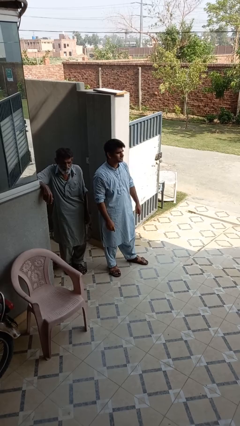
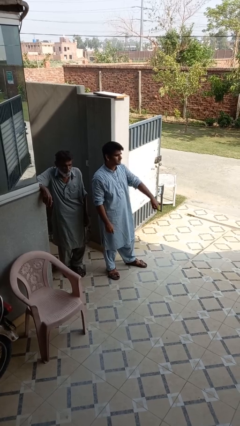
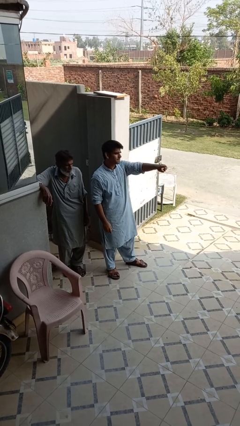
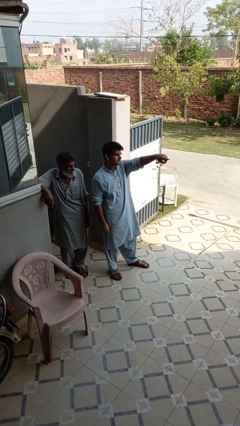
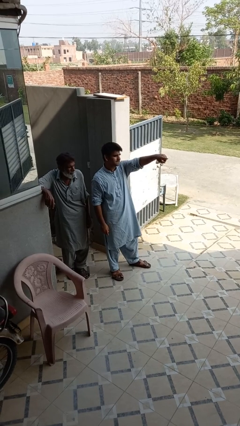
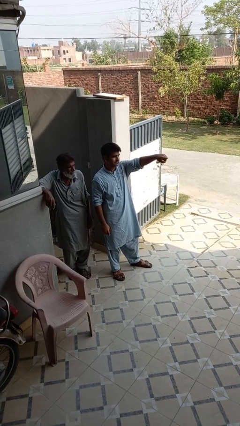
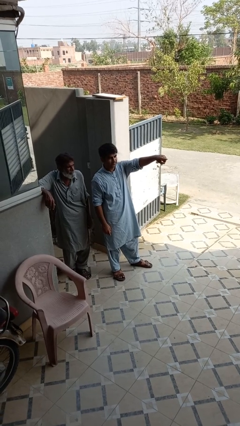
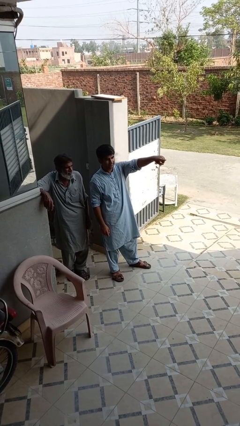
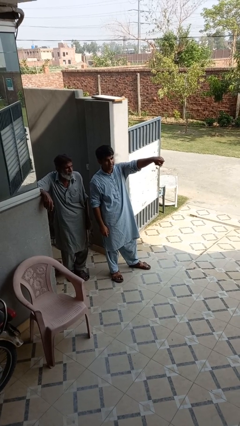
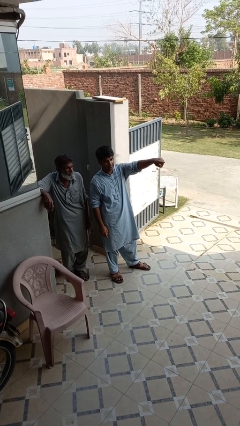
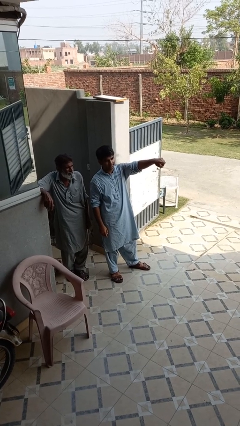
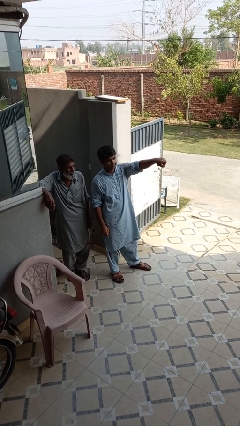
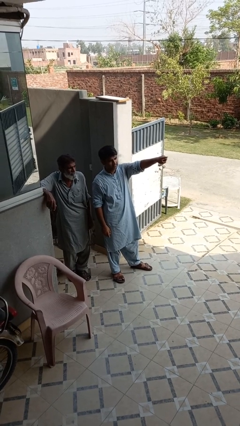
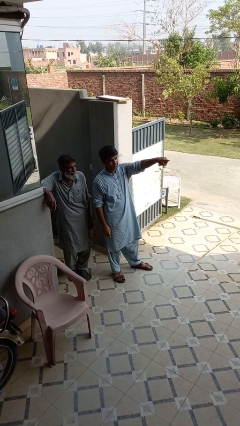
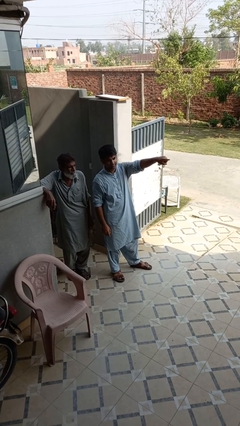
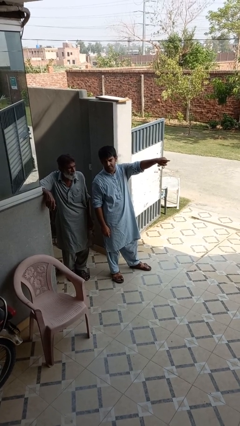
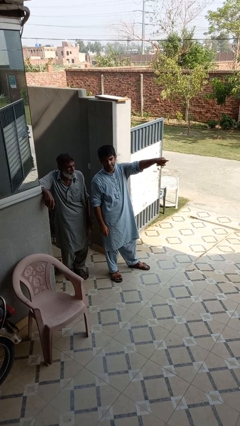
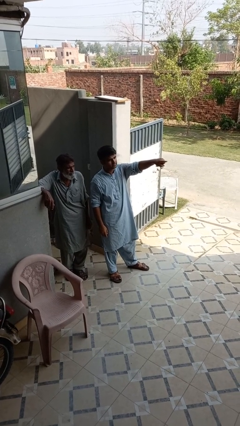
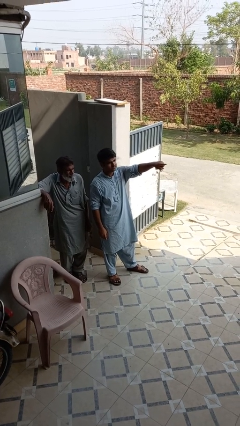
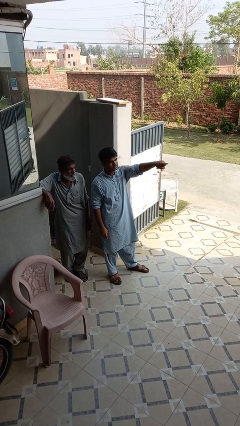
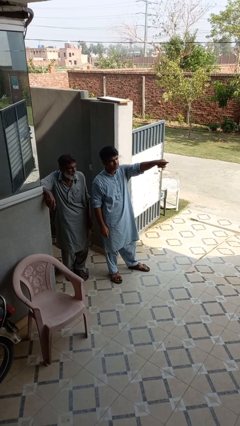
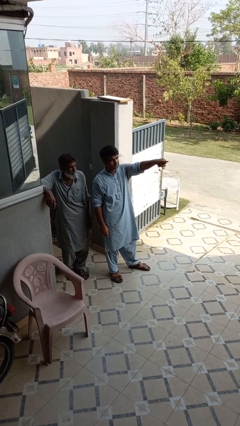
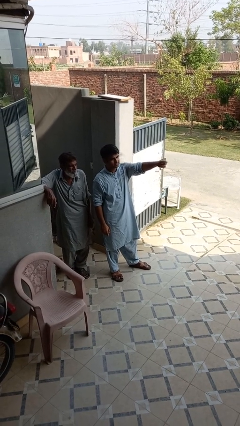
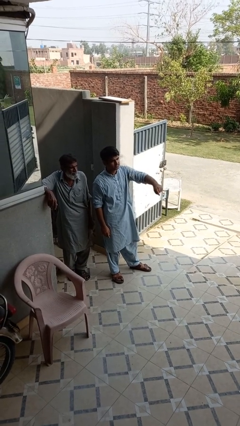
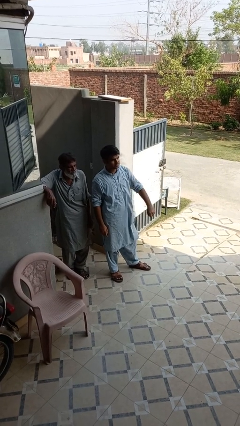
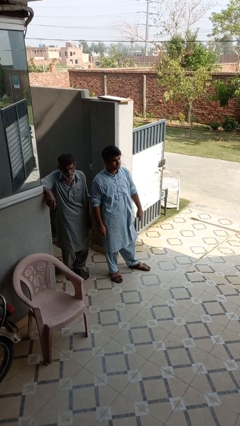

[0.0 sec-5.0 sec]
person points at person

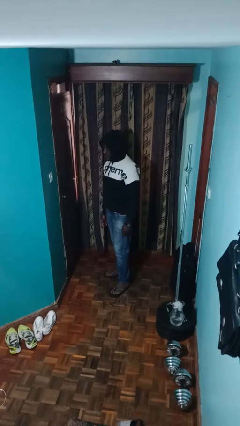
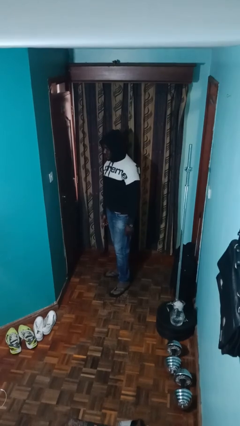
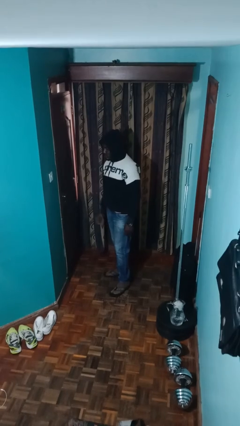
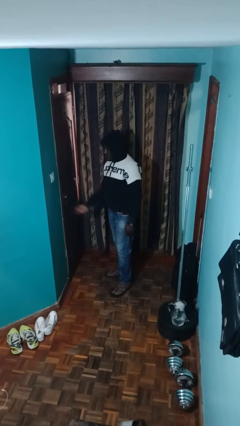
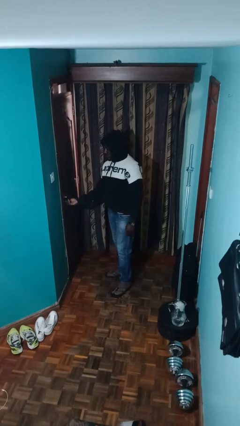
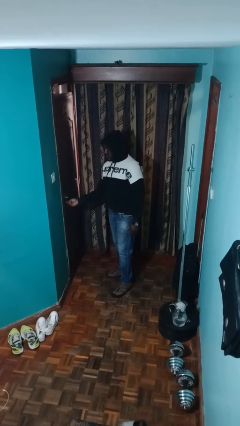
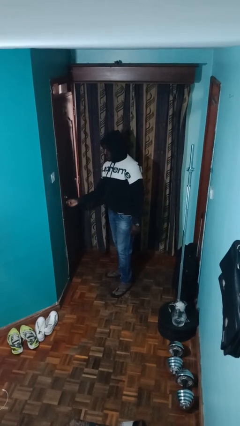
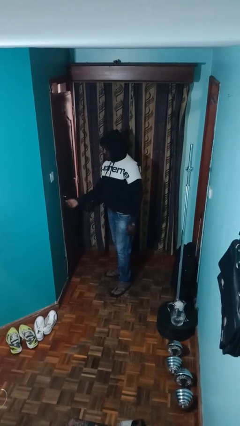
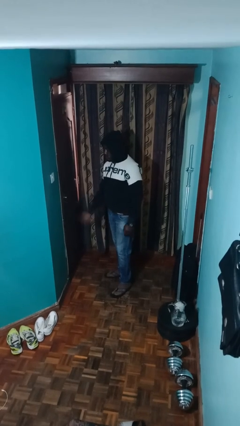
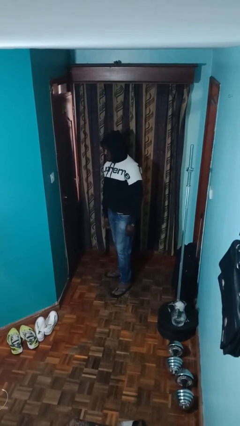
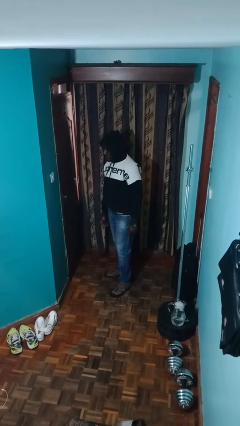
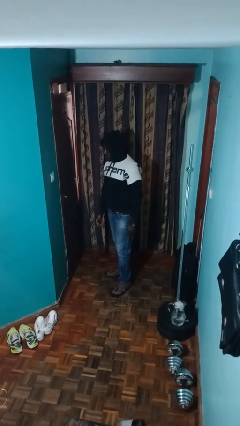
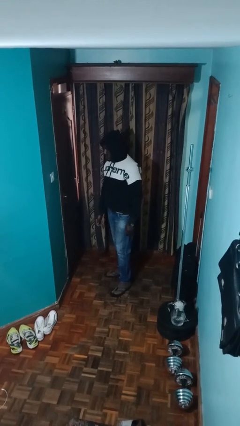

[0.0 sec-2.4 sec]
person unlocks door with keys

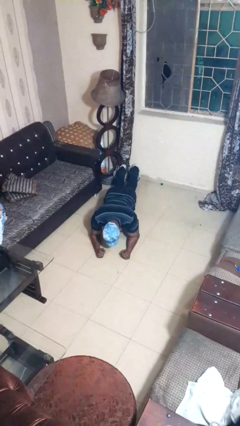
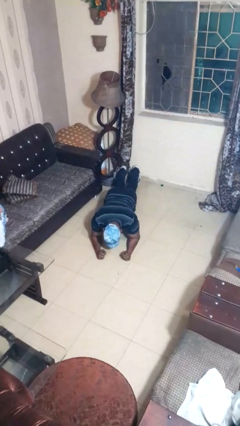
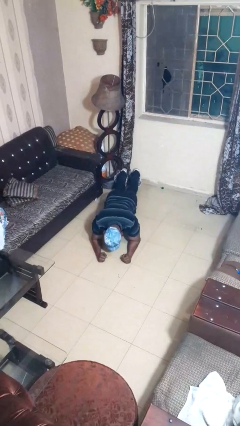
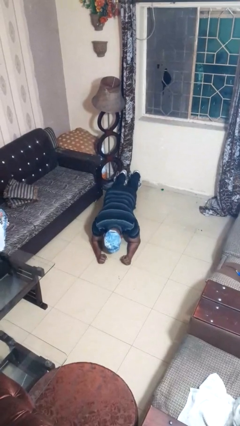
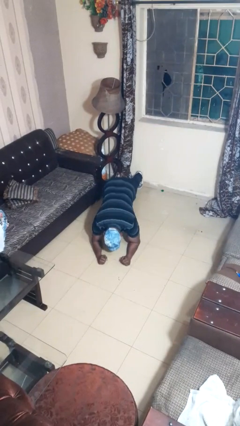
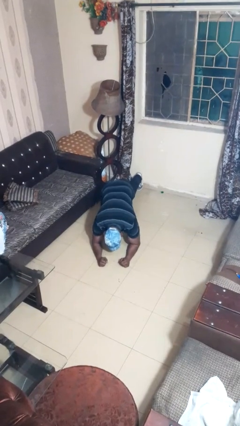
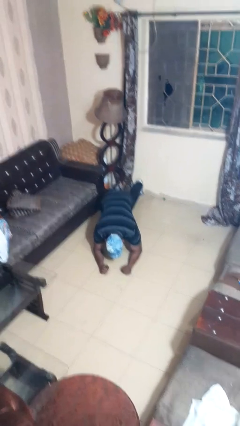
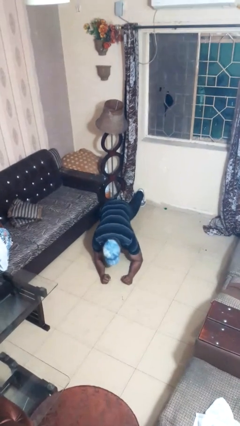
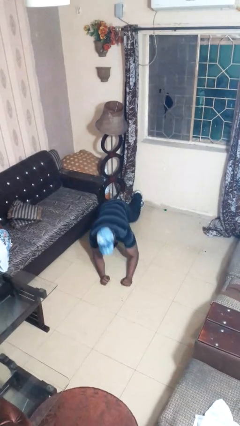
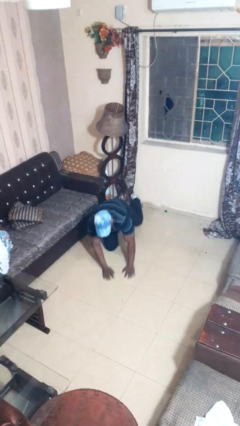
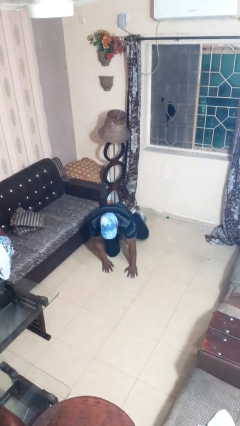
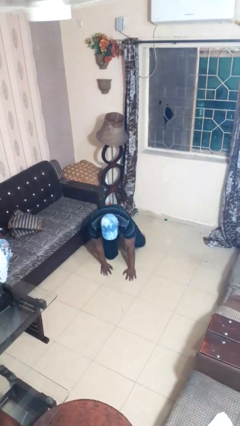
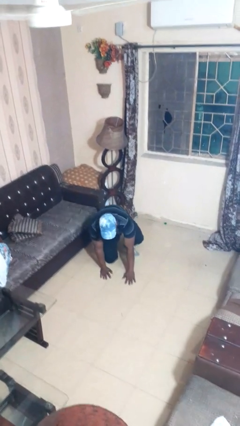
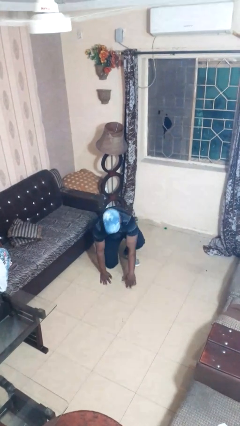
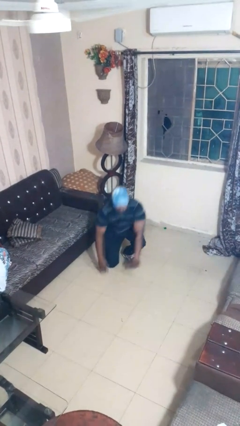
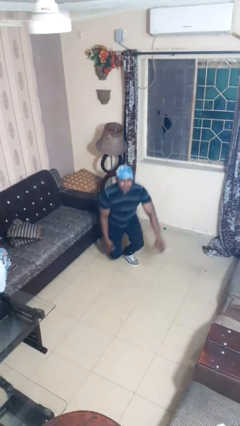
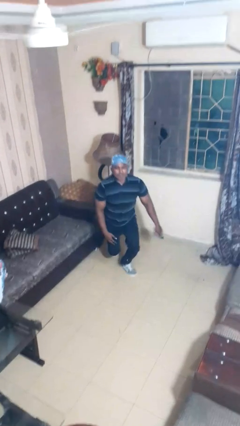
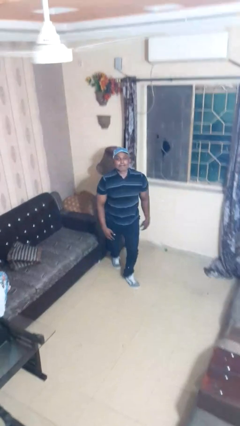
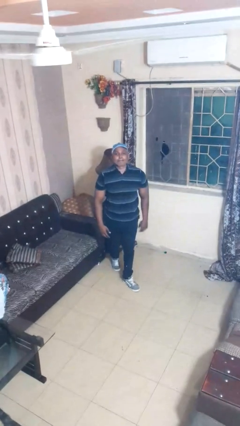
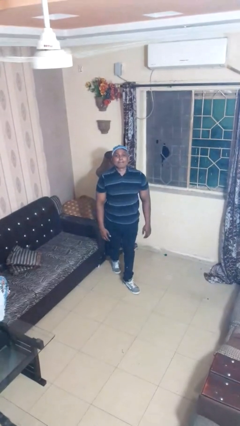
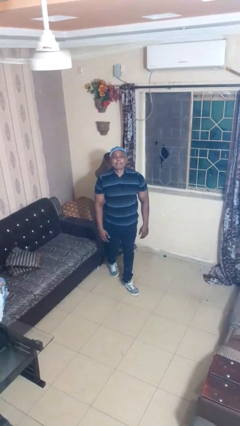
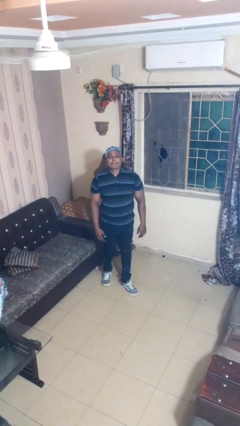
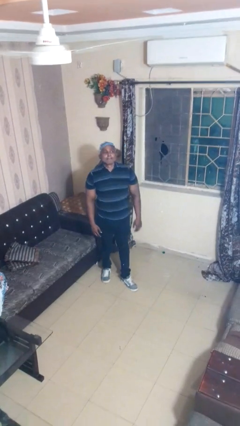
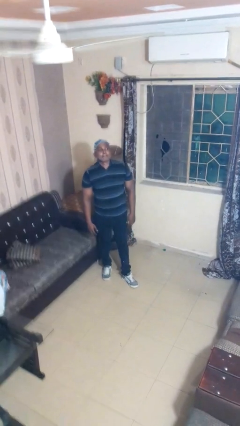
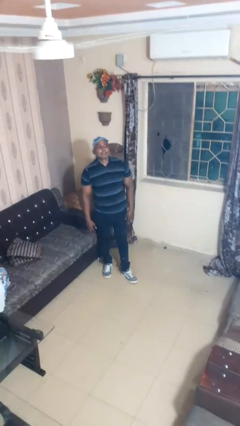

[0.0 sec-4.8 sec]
person stands up from floor

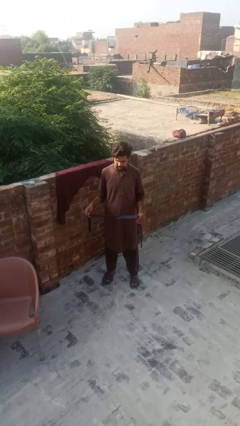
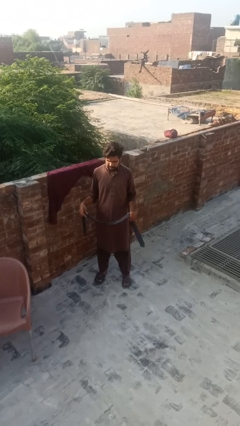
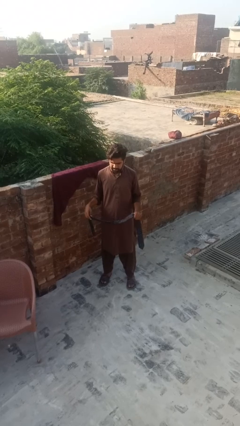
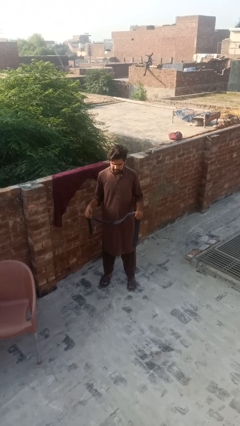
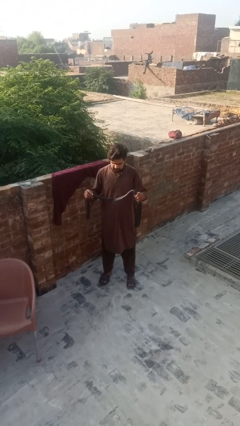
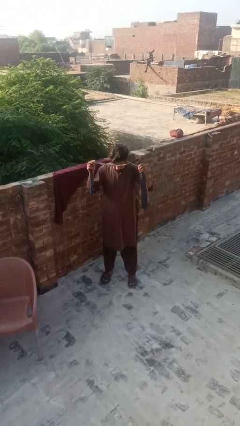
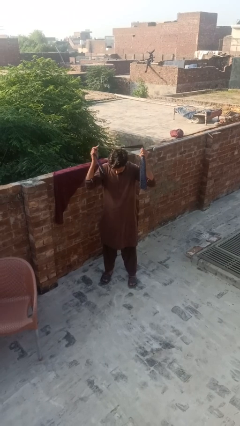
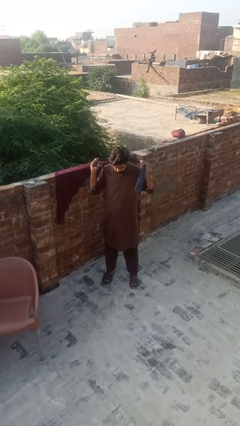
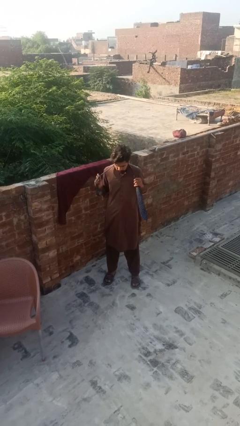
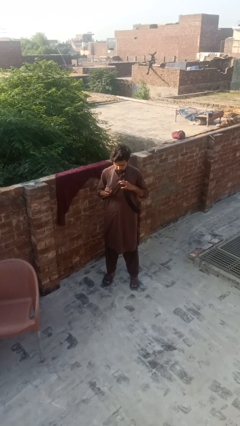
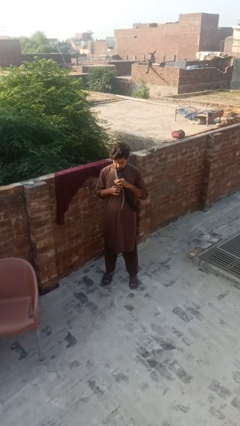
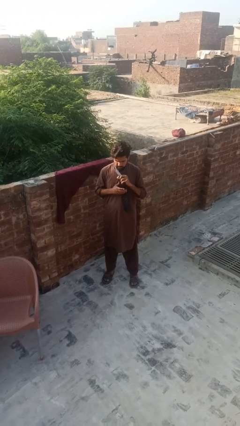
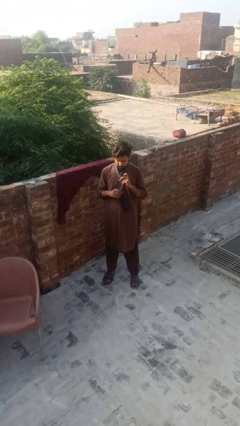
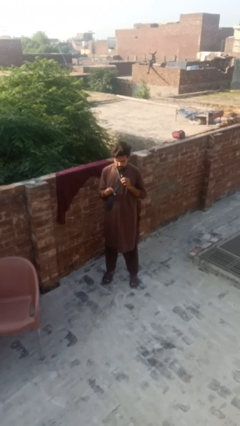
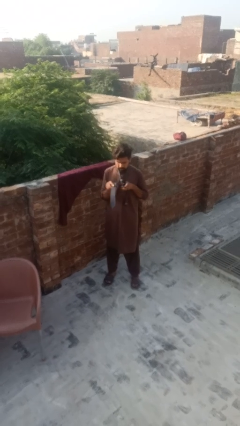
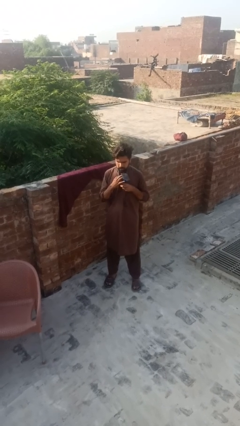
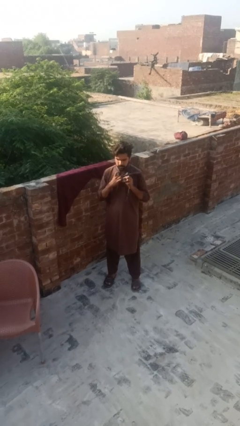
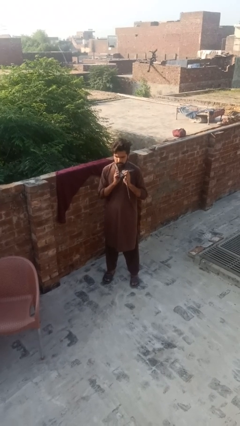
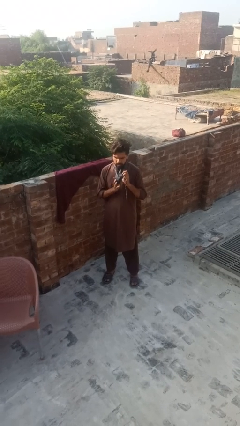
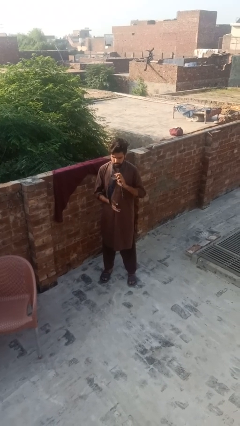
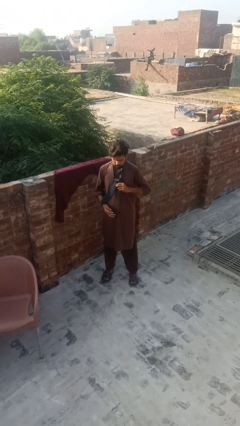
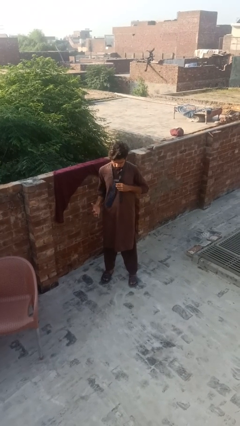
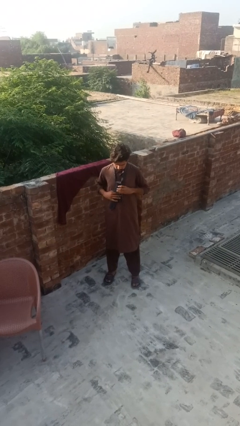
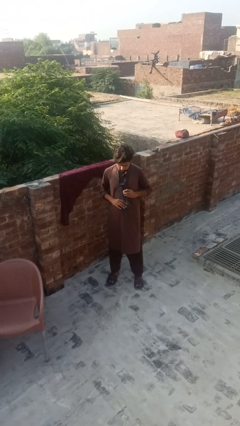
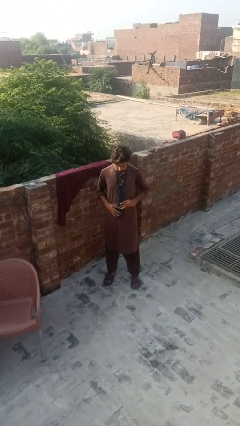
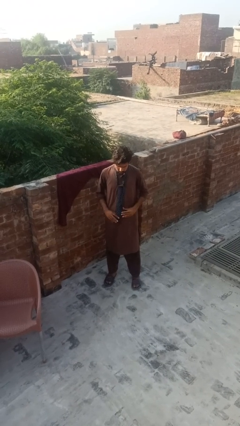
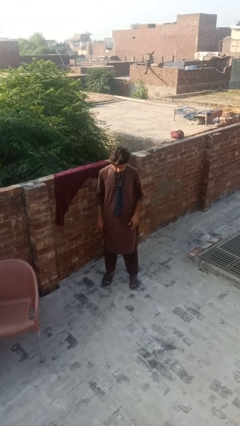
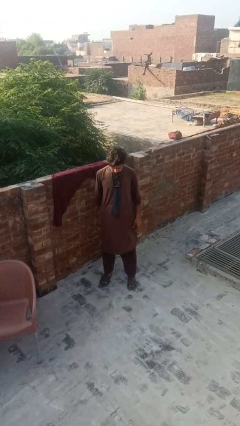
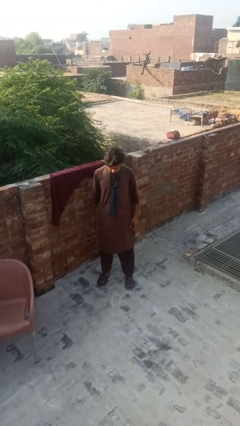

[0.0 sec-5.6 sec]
person puts on necktie

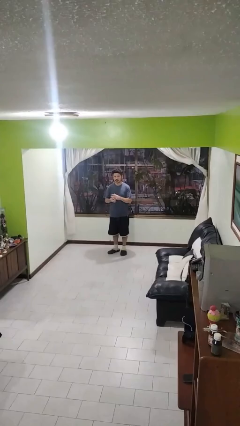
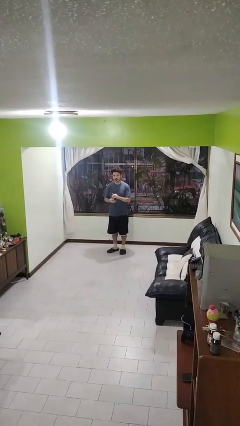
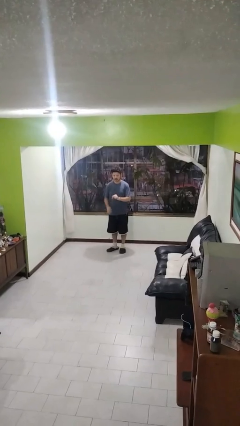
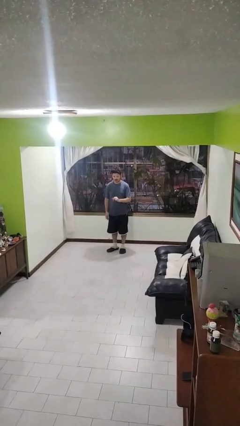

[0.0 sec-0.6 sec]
person puts on ring
